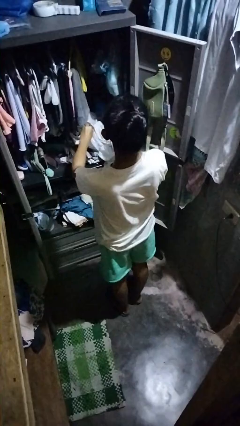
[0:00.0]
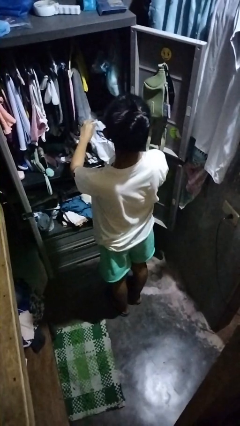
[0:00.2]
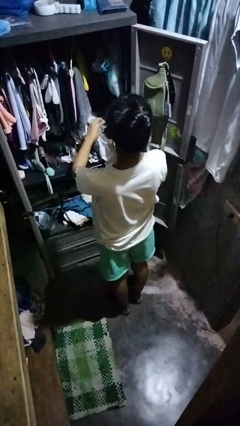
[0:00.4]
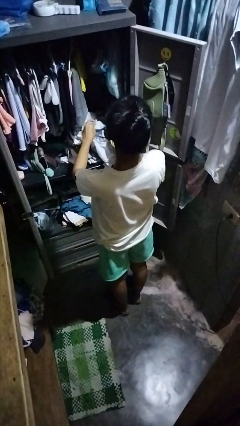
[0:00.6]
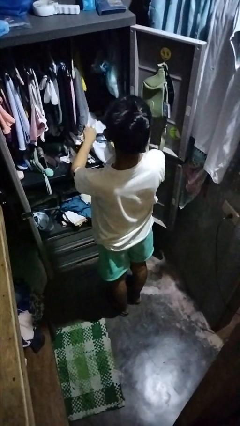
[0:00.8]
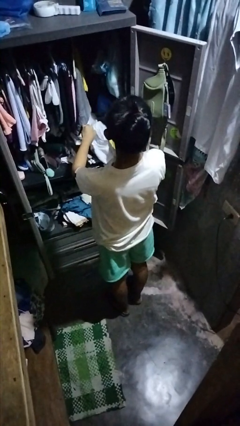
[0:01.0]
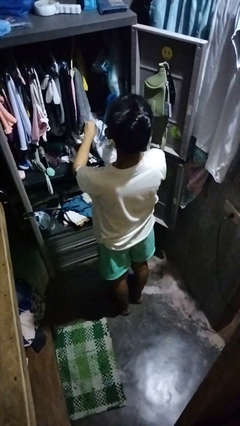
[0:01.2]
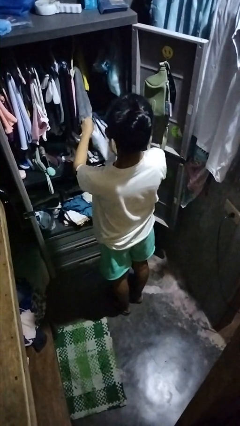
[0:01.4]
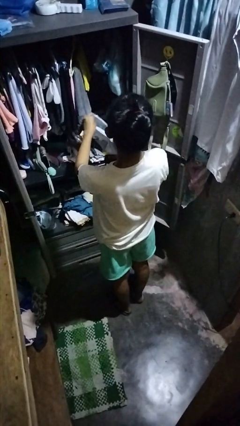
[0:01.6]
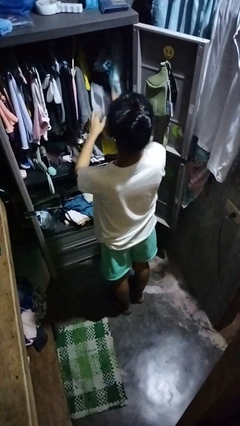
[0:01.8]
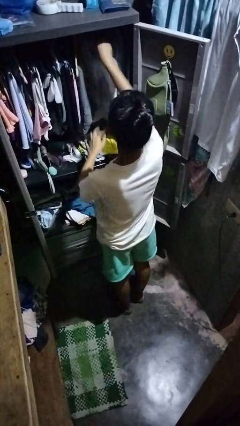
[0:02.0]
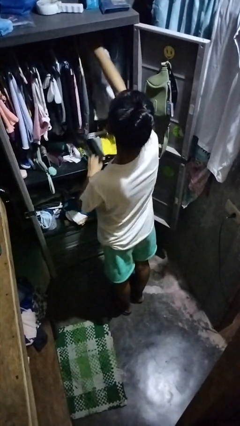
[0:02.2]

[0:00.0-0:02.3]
person puts clothes into closet

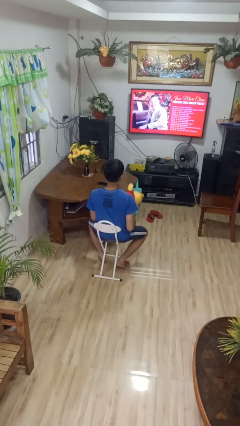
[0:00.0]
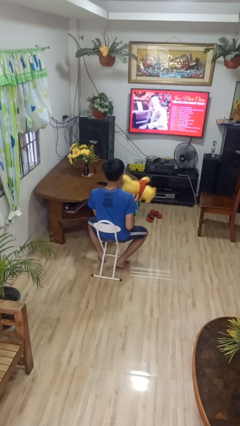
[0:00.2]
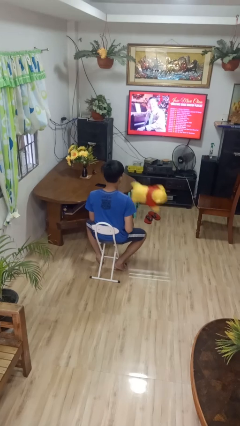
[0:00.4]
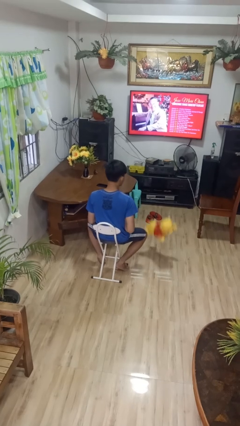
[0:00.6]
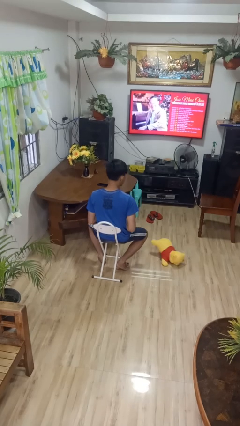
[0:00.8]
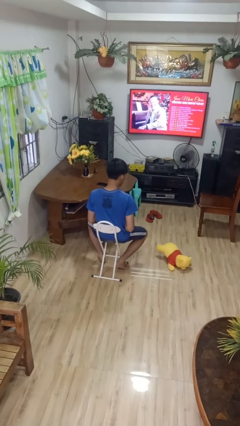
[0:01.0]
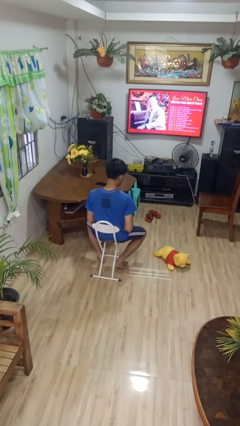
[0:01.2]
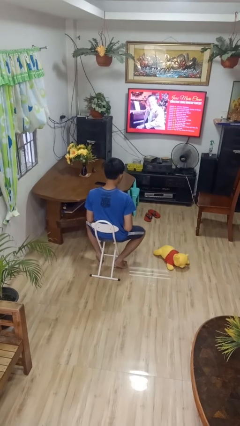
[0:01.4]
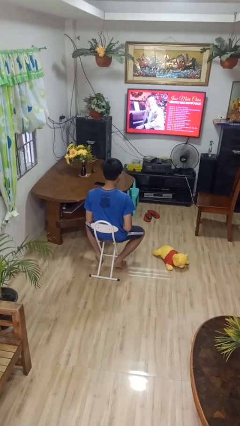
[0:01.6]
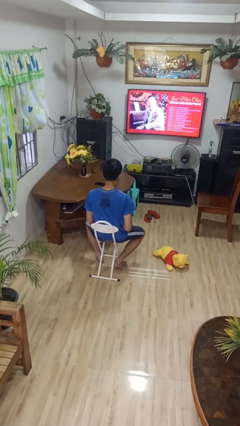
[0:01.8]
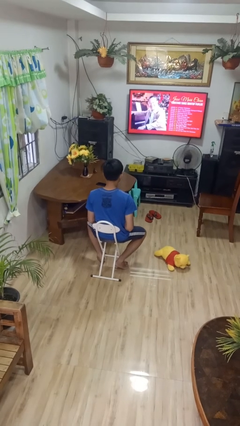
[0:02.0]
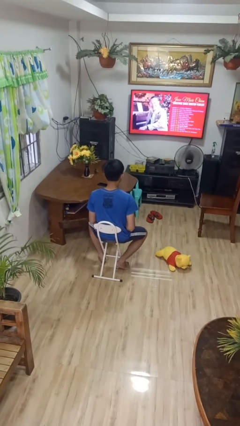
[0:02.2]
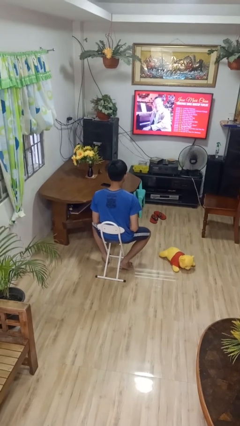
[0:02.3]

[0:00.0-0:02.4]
person drops object

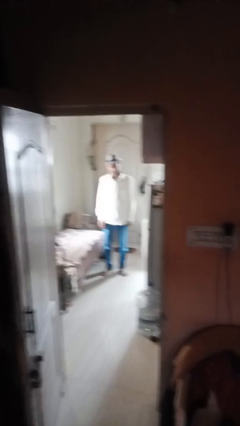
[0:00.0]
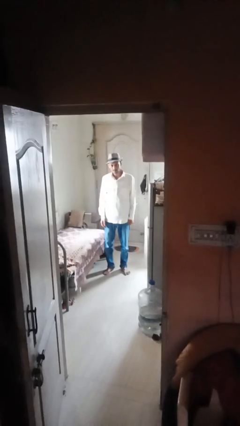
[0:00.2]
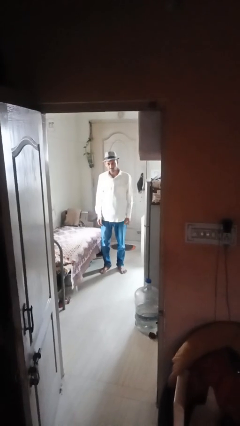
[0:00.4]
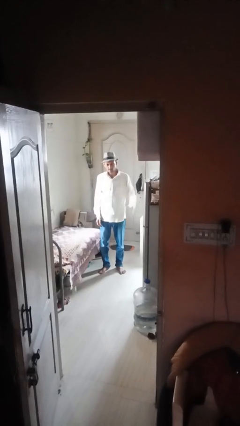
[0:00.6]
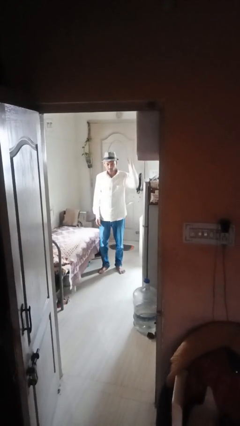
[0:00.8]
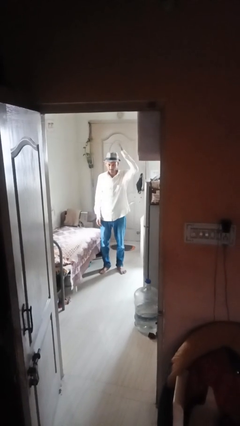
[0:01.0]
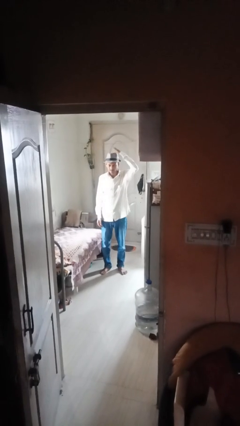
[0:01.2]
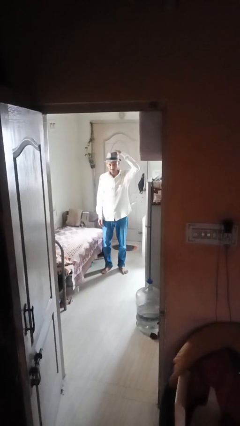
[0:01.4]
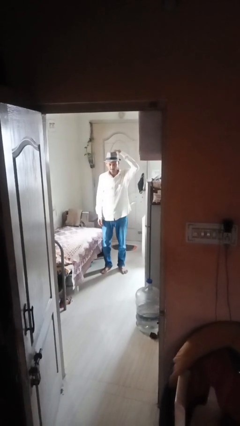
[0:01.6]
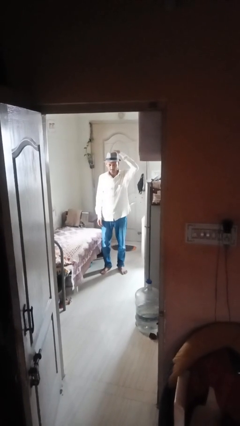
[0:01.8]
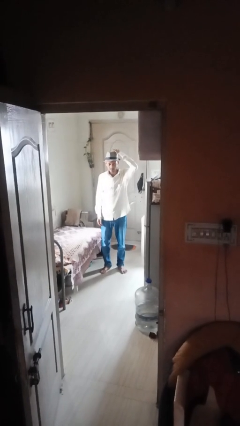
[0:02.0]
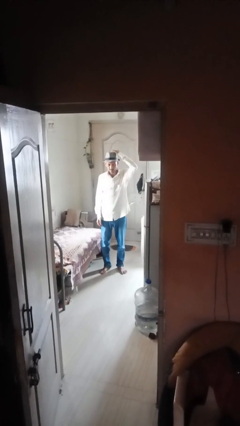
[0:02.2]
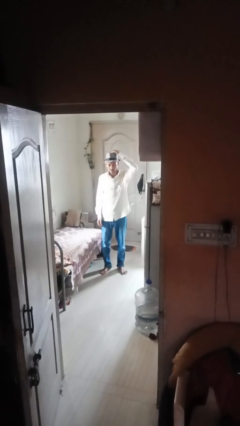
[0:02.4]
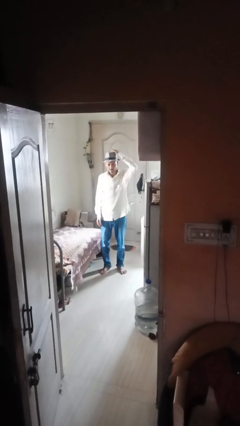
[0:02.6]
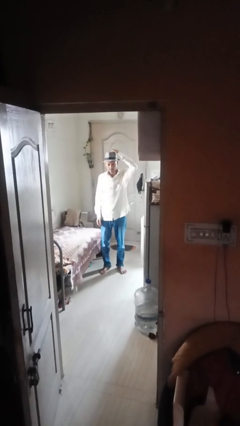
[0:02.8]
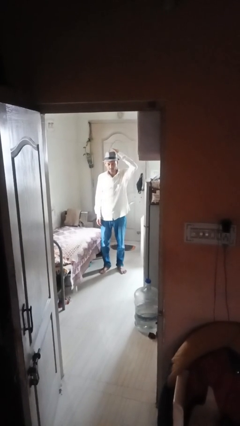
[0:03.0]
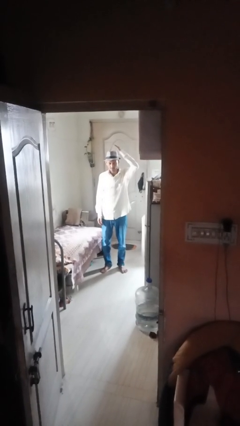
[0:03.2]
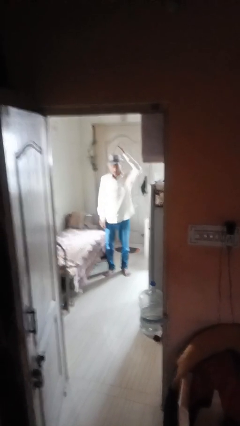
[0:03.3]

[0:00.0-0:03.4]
person pats head

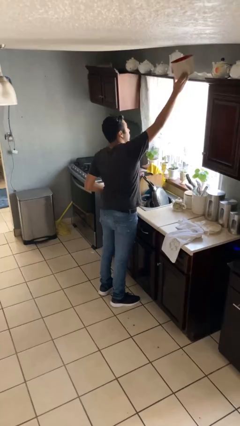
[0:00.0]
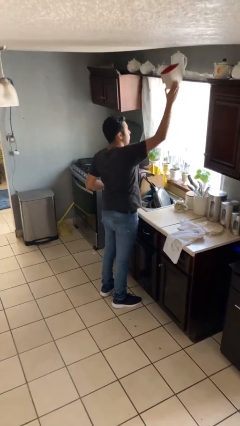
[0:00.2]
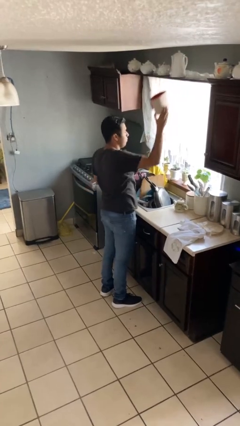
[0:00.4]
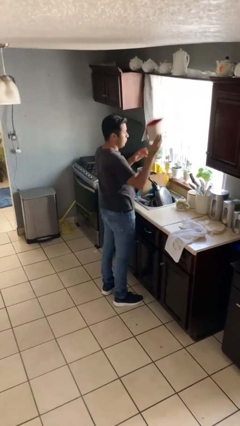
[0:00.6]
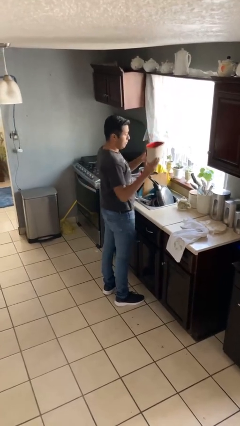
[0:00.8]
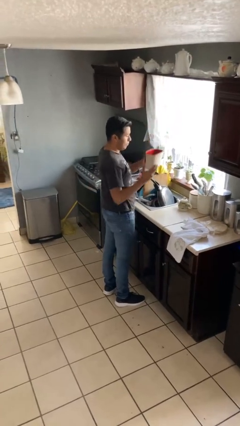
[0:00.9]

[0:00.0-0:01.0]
person picks up object from countertop

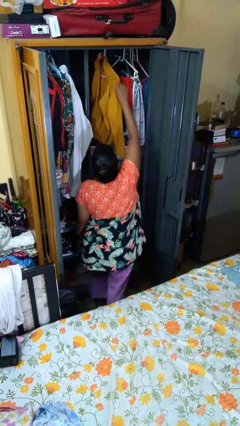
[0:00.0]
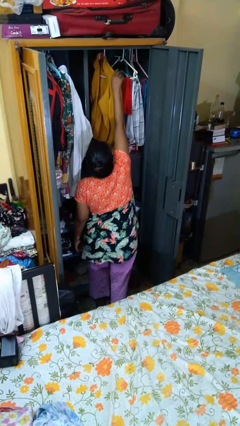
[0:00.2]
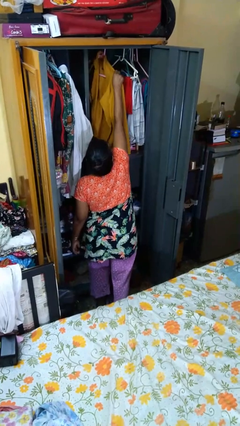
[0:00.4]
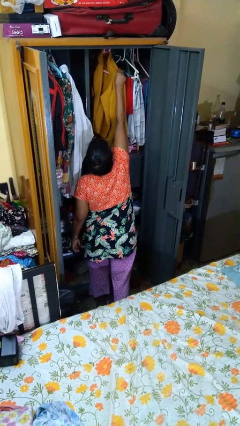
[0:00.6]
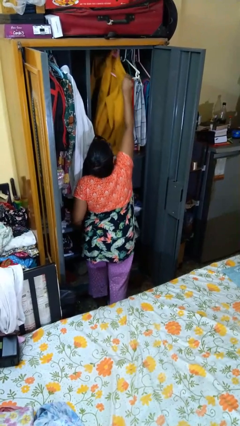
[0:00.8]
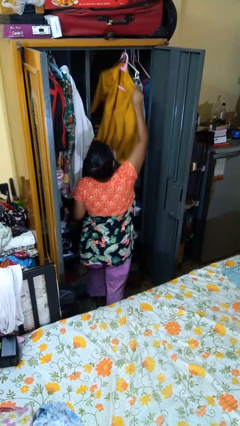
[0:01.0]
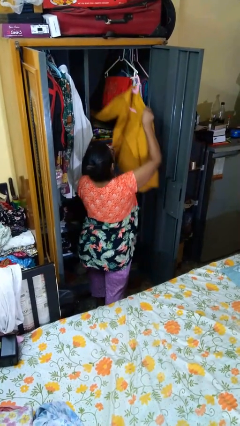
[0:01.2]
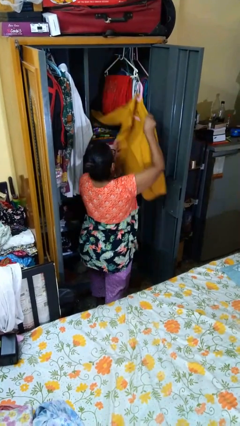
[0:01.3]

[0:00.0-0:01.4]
person takes clothes from closet

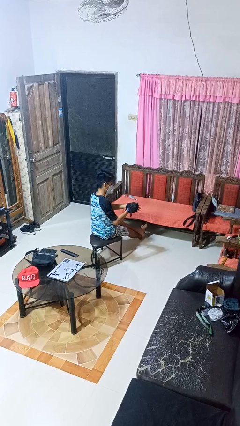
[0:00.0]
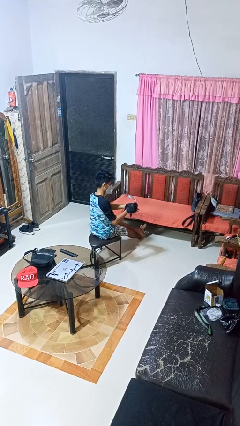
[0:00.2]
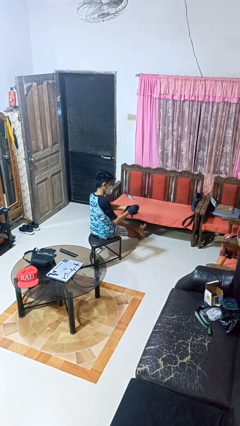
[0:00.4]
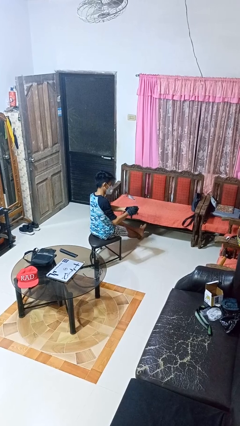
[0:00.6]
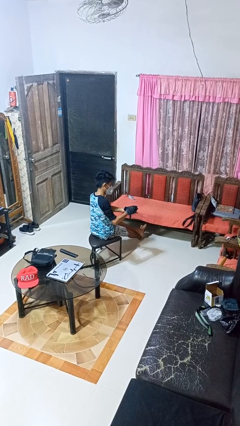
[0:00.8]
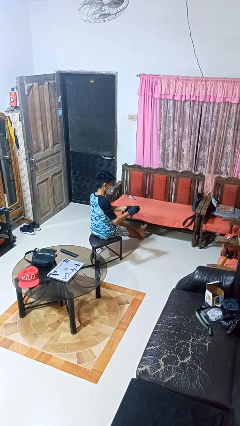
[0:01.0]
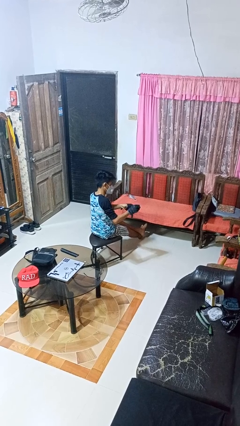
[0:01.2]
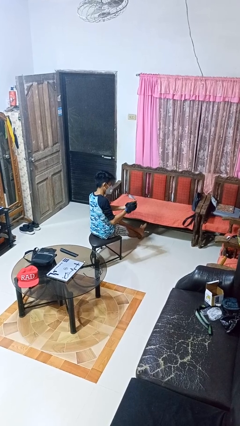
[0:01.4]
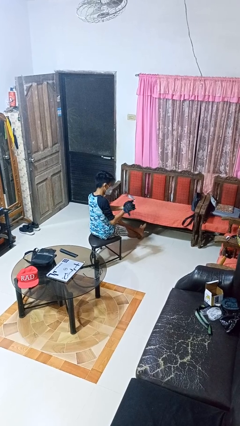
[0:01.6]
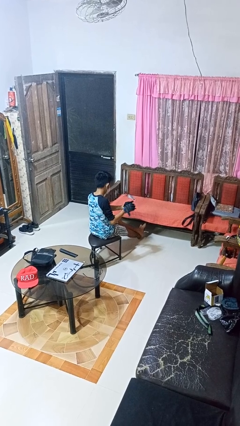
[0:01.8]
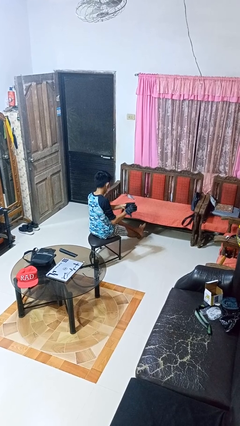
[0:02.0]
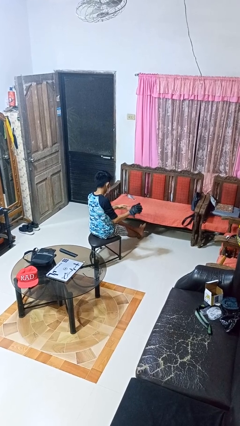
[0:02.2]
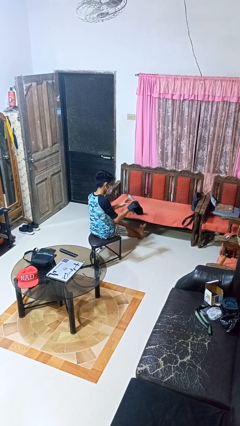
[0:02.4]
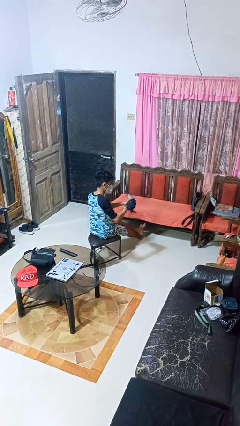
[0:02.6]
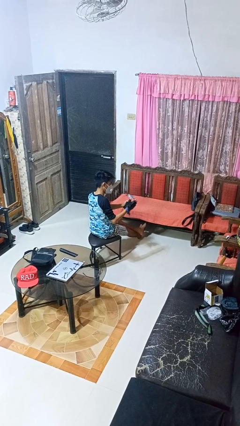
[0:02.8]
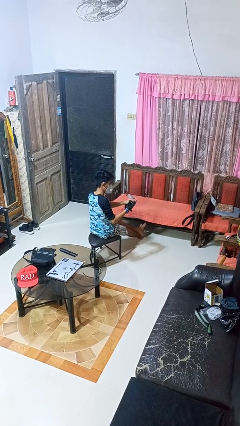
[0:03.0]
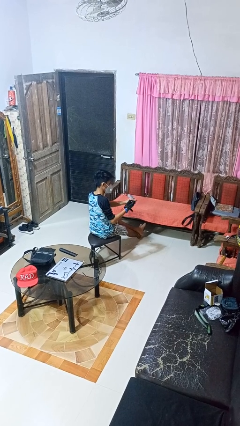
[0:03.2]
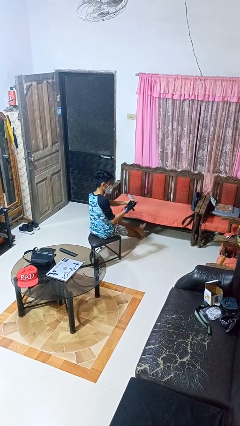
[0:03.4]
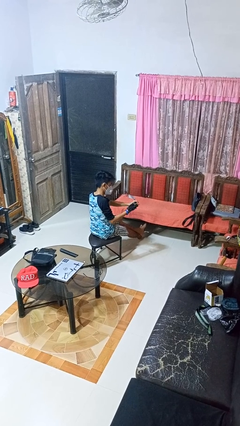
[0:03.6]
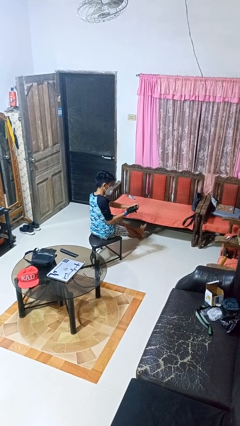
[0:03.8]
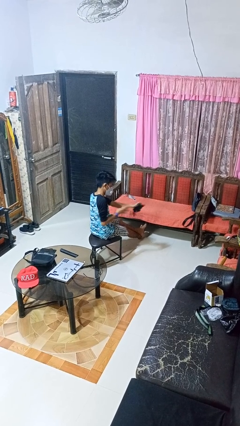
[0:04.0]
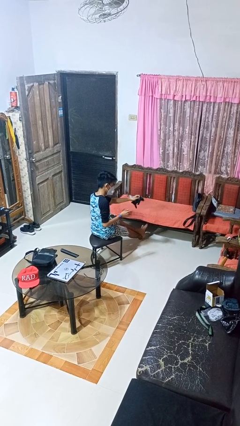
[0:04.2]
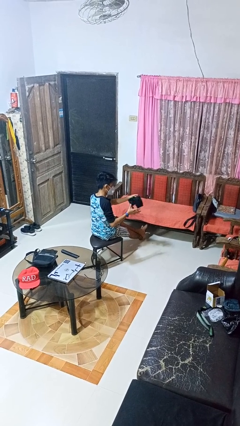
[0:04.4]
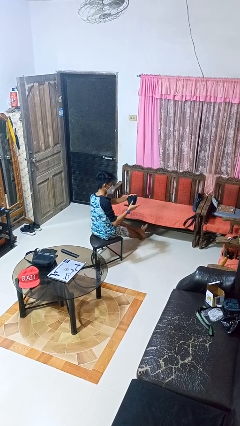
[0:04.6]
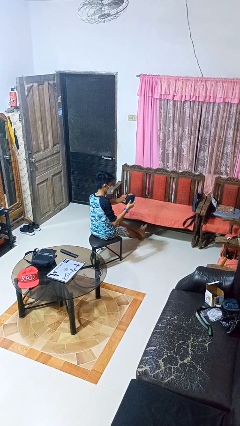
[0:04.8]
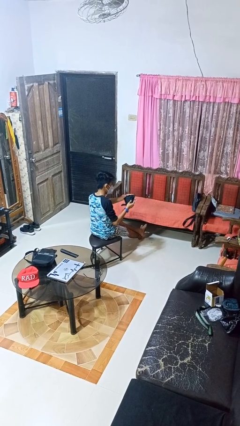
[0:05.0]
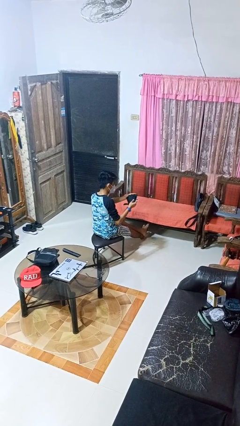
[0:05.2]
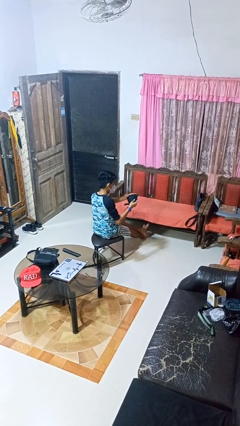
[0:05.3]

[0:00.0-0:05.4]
person takes off gloves

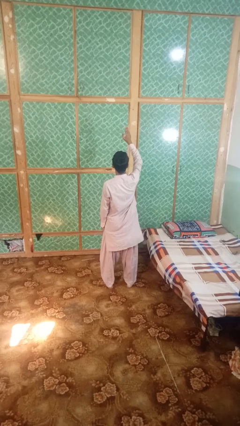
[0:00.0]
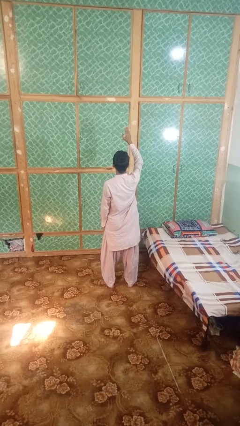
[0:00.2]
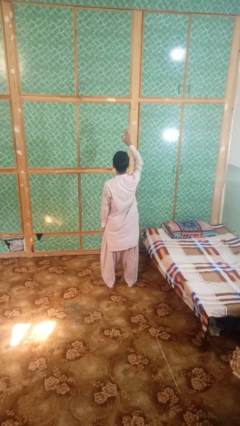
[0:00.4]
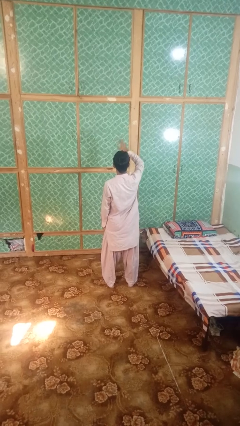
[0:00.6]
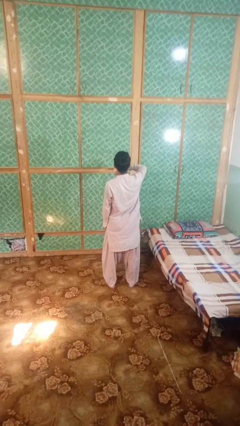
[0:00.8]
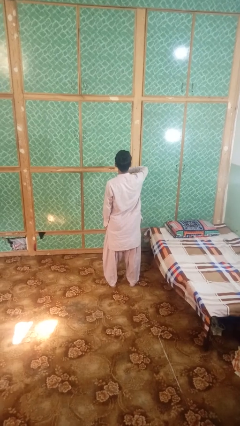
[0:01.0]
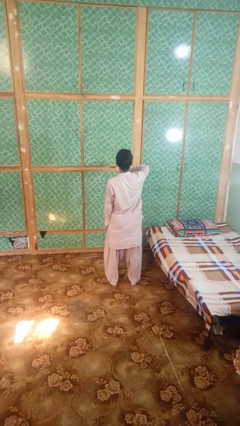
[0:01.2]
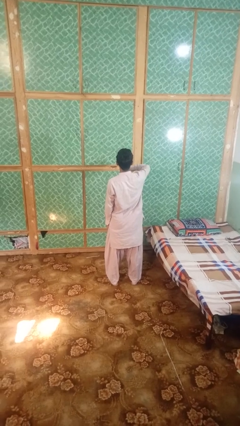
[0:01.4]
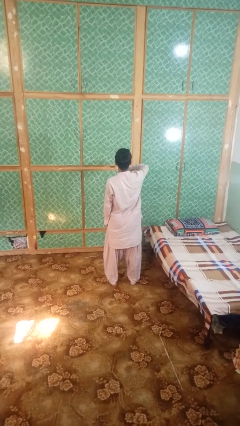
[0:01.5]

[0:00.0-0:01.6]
person gestures swipe down
